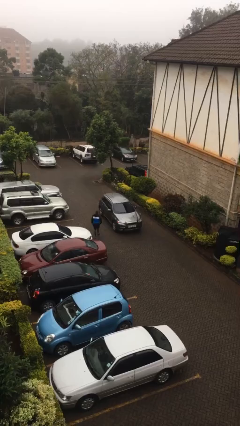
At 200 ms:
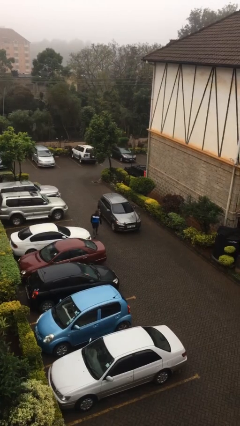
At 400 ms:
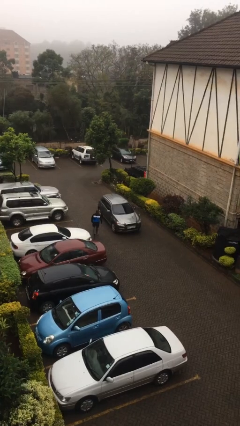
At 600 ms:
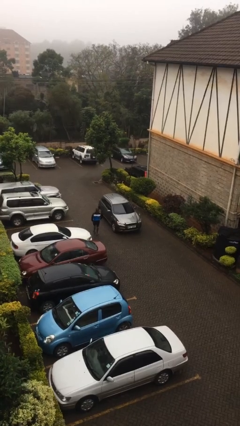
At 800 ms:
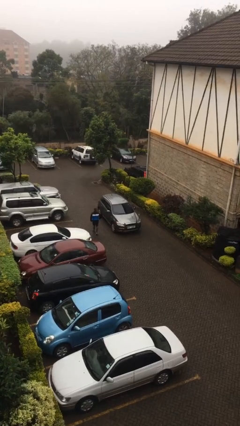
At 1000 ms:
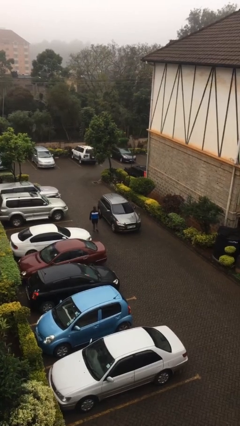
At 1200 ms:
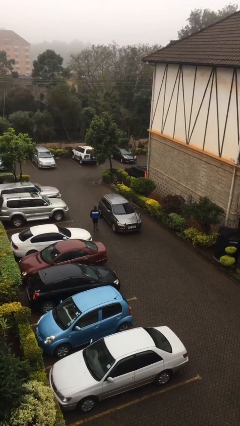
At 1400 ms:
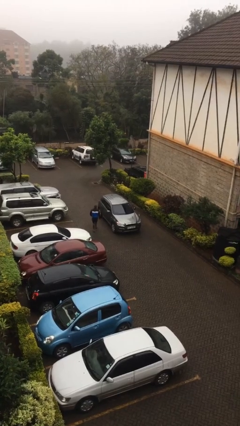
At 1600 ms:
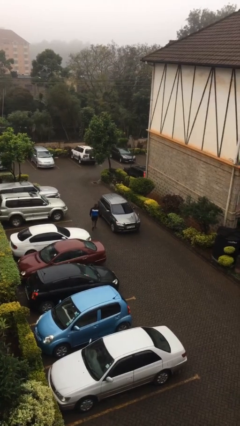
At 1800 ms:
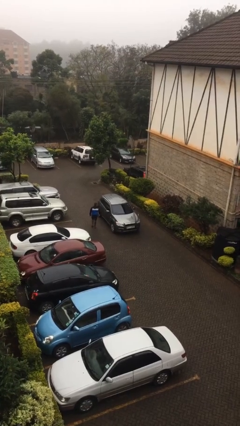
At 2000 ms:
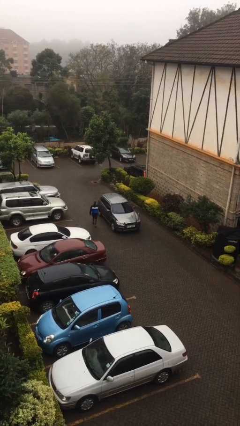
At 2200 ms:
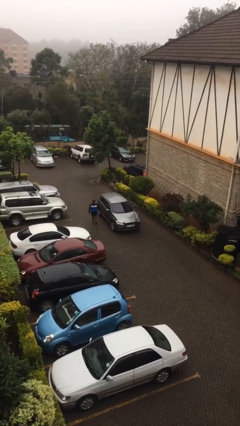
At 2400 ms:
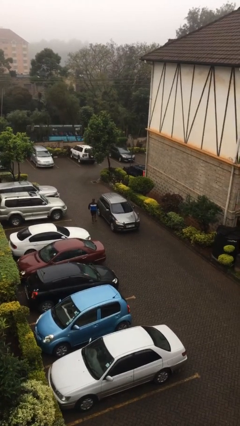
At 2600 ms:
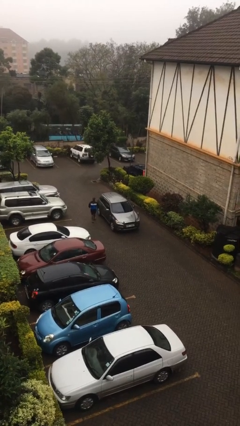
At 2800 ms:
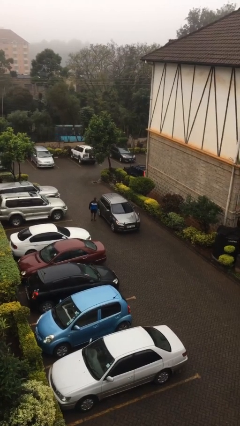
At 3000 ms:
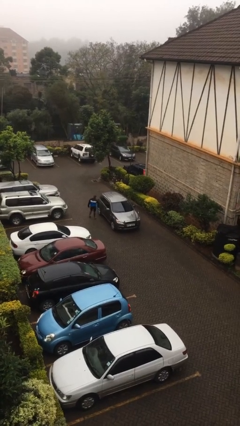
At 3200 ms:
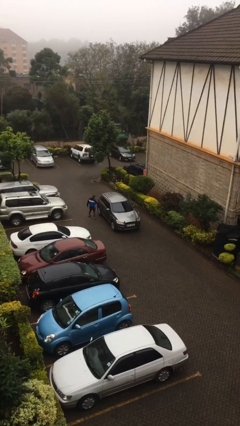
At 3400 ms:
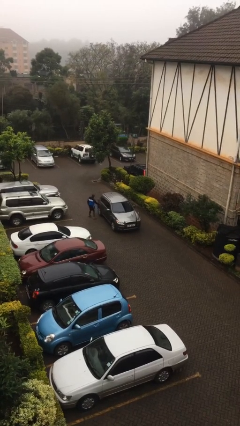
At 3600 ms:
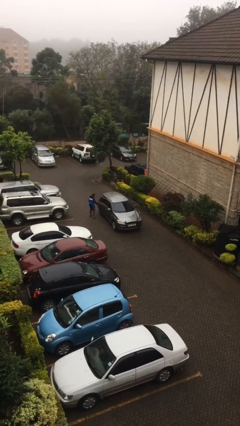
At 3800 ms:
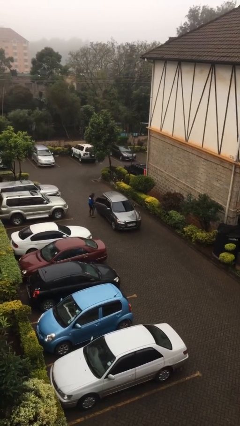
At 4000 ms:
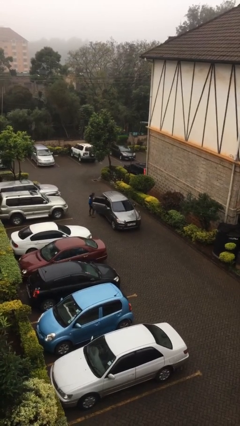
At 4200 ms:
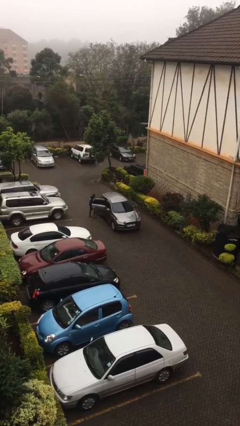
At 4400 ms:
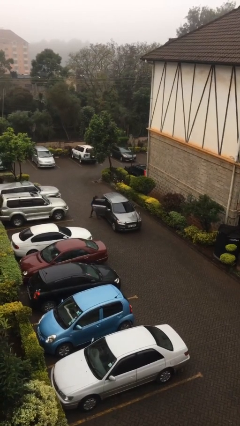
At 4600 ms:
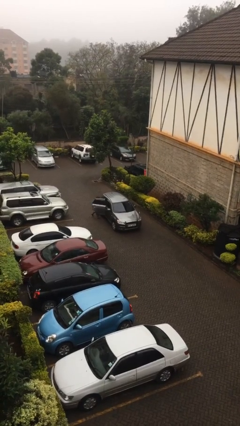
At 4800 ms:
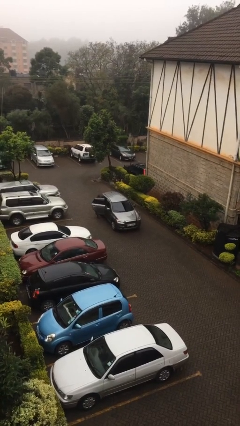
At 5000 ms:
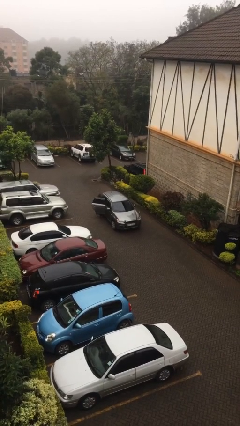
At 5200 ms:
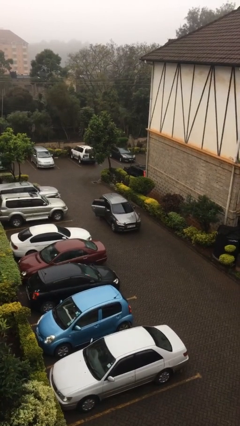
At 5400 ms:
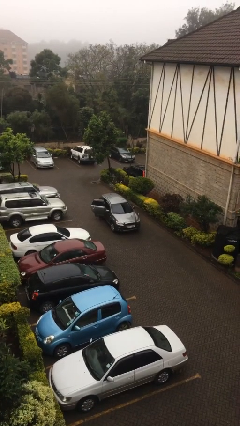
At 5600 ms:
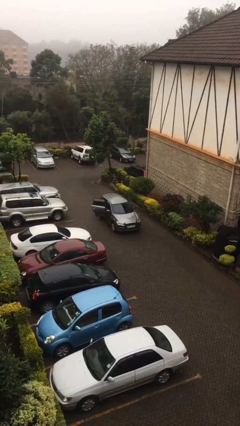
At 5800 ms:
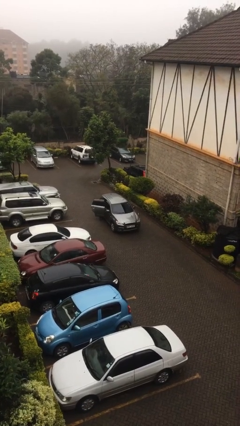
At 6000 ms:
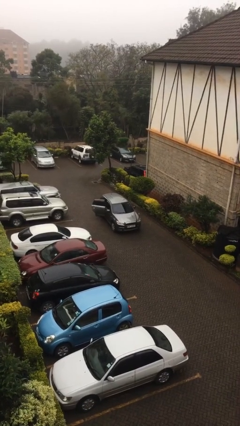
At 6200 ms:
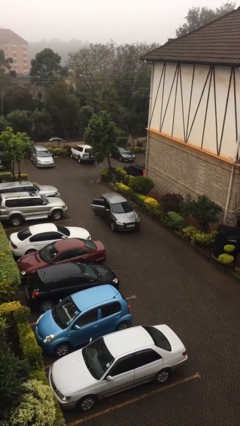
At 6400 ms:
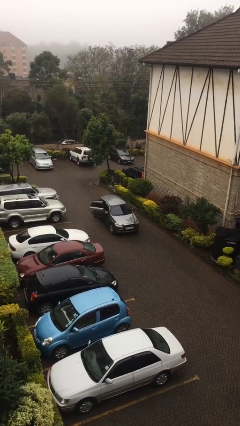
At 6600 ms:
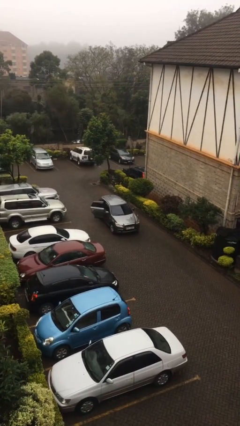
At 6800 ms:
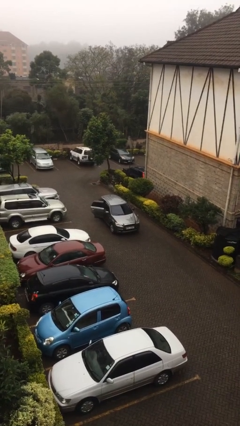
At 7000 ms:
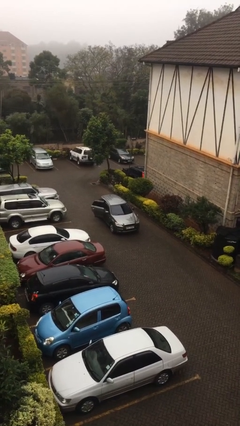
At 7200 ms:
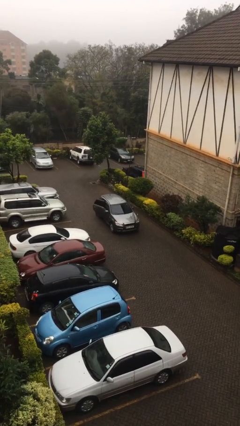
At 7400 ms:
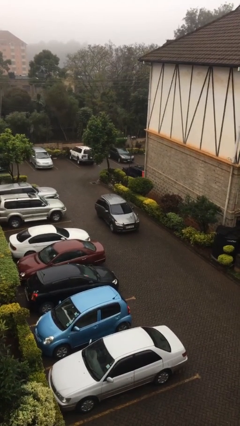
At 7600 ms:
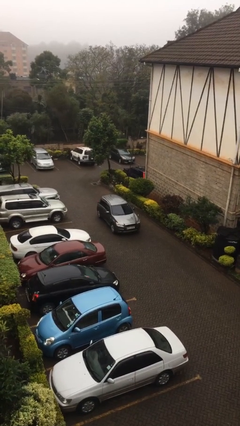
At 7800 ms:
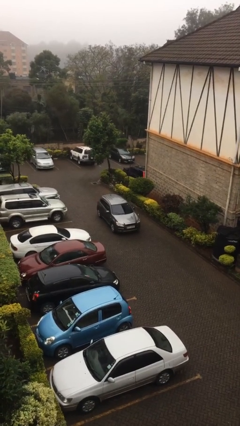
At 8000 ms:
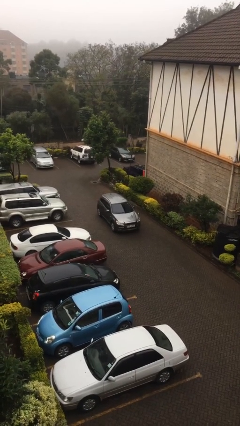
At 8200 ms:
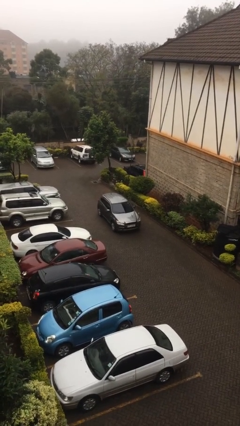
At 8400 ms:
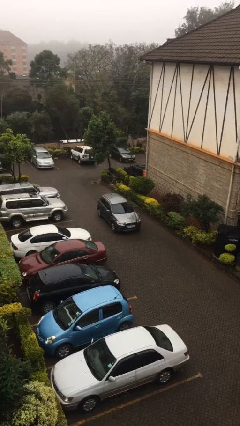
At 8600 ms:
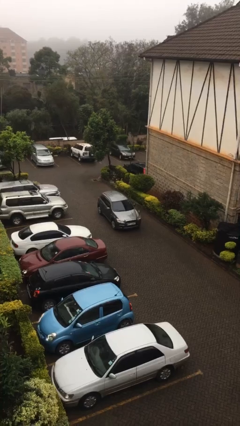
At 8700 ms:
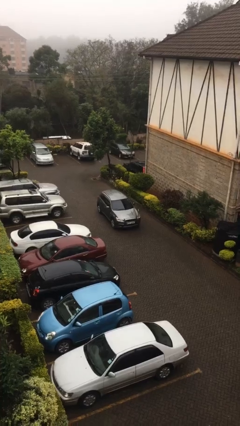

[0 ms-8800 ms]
car picks up person

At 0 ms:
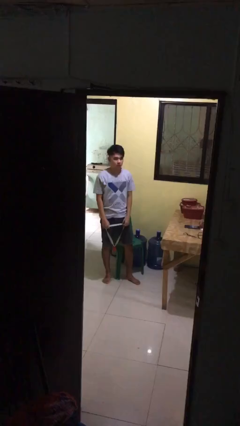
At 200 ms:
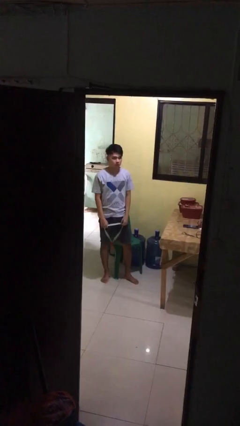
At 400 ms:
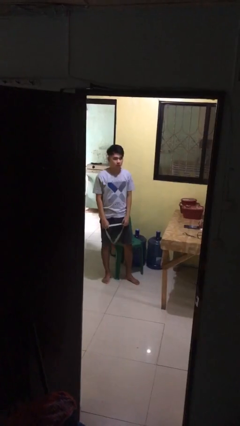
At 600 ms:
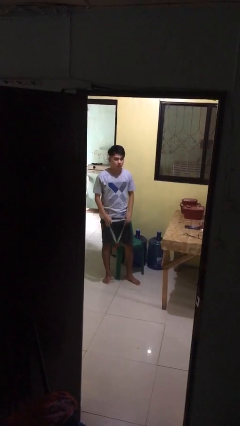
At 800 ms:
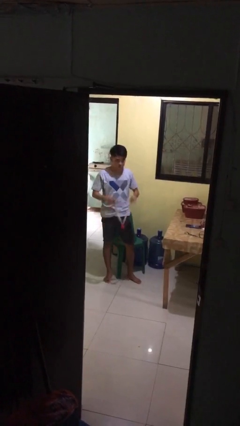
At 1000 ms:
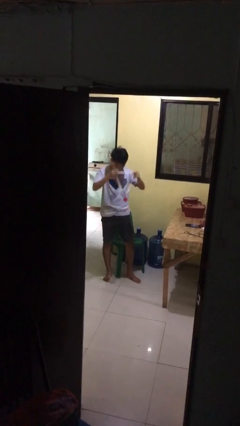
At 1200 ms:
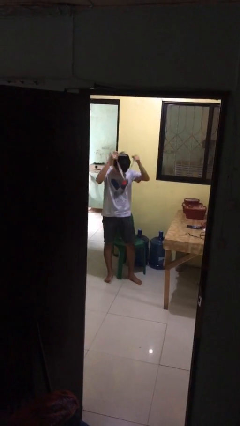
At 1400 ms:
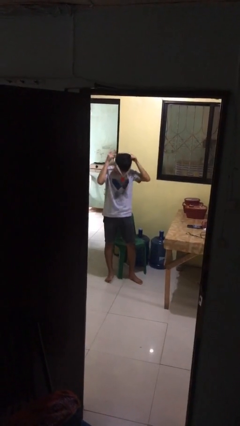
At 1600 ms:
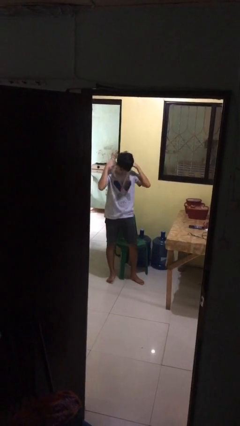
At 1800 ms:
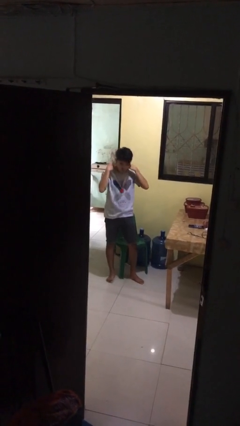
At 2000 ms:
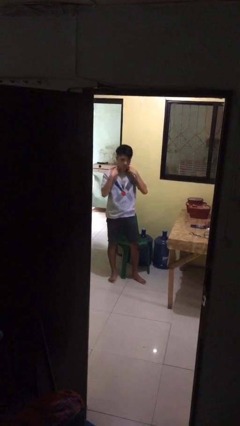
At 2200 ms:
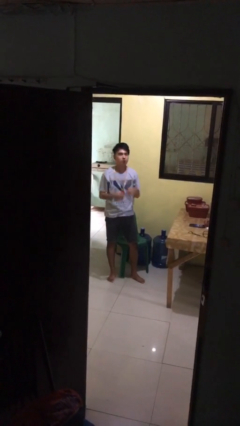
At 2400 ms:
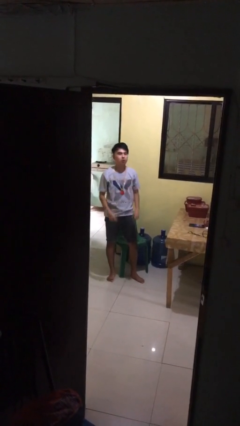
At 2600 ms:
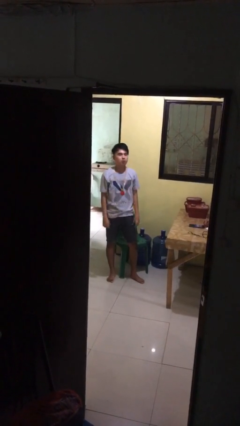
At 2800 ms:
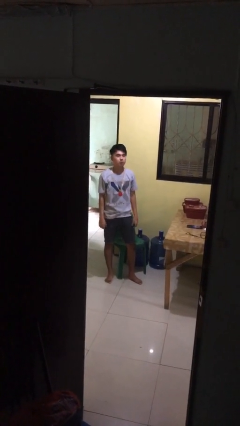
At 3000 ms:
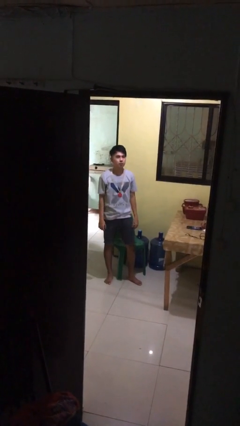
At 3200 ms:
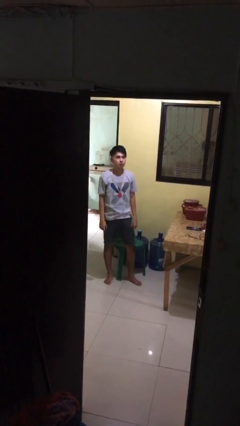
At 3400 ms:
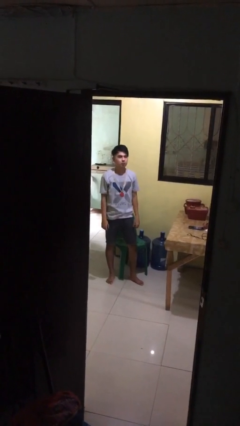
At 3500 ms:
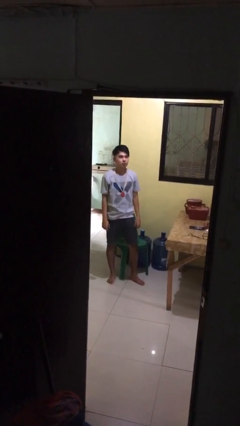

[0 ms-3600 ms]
person puts on necklace

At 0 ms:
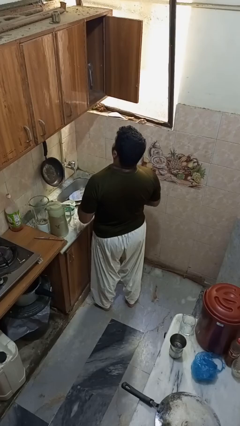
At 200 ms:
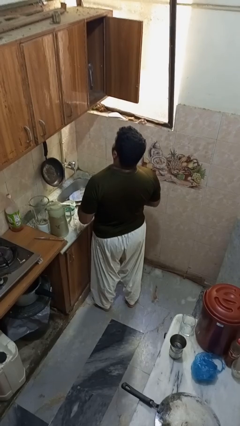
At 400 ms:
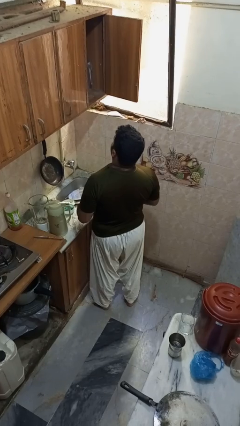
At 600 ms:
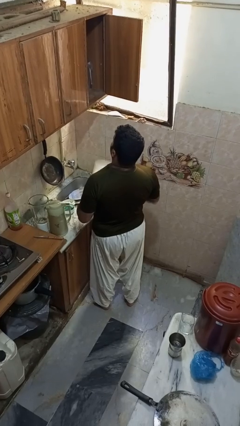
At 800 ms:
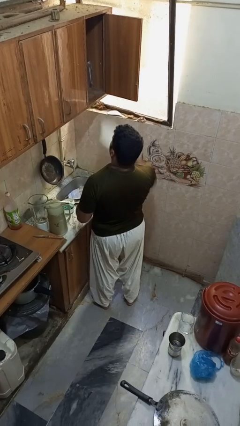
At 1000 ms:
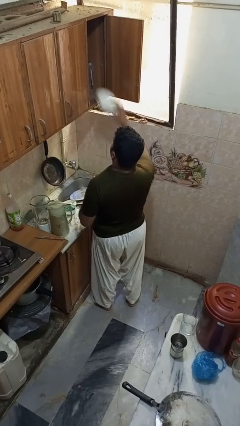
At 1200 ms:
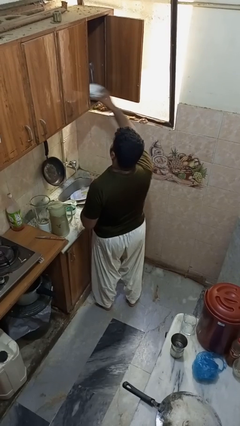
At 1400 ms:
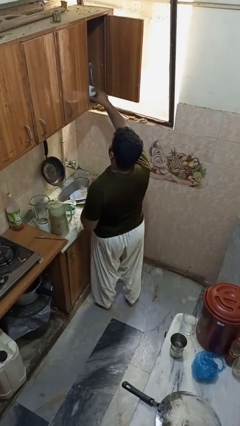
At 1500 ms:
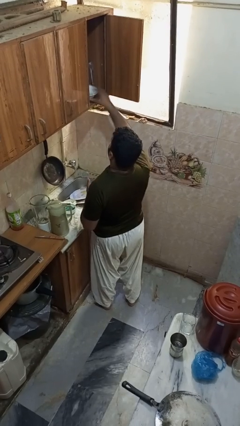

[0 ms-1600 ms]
person puts object in cabinet

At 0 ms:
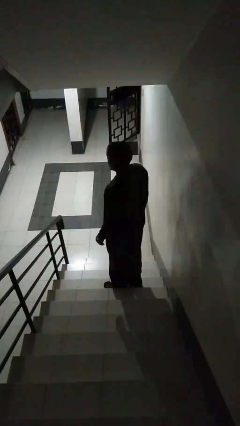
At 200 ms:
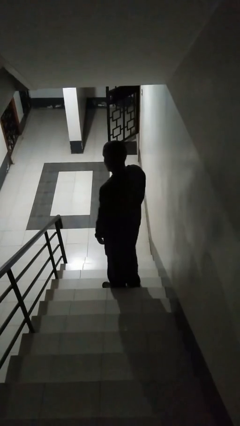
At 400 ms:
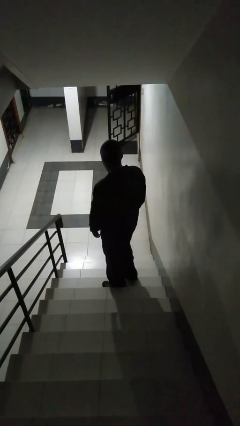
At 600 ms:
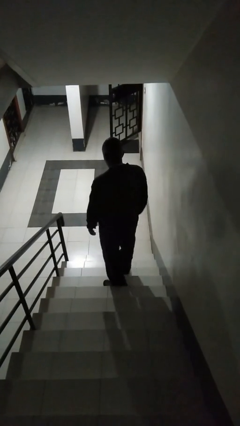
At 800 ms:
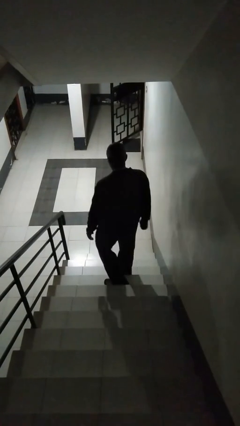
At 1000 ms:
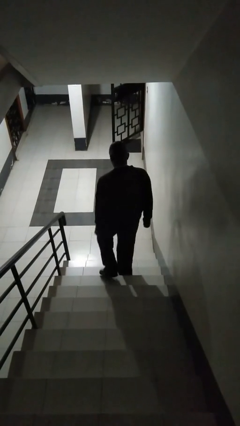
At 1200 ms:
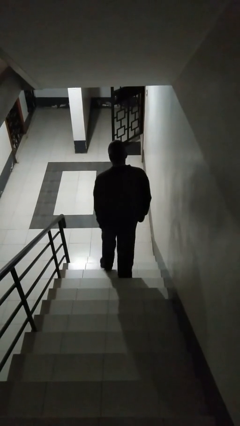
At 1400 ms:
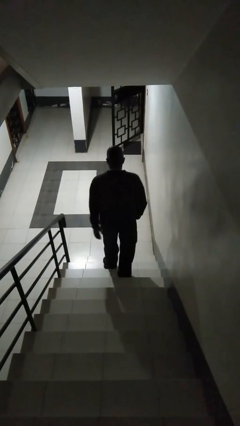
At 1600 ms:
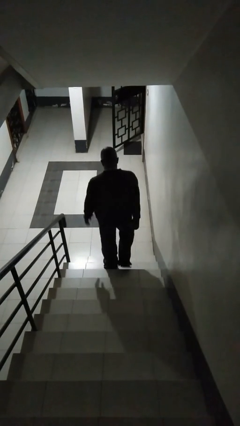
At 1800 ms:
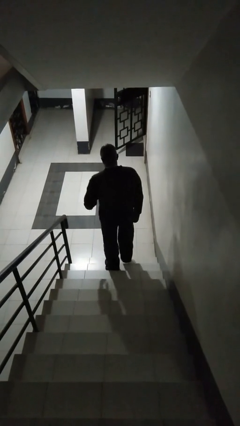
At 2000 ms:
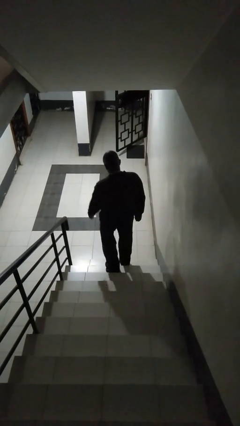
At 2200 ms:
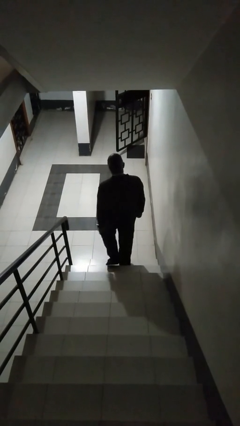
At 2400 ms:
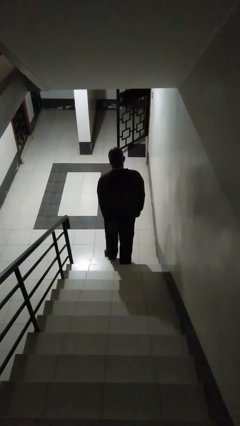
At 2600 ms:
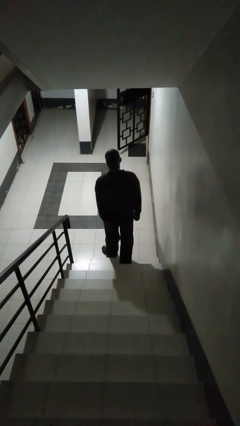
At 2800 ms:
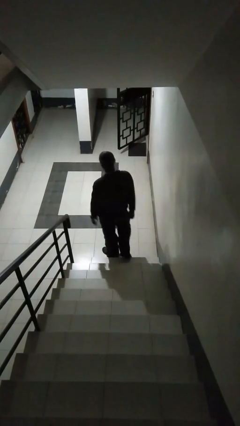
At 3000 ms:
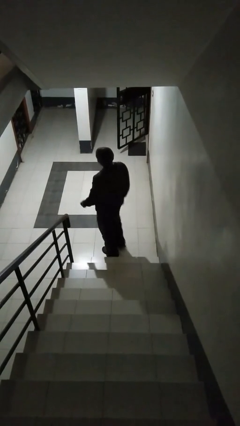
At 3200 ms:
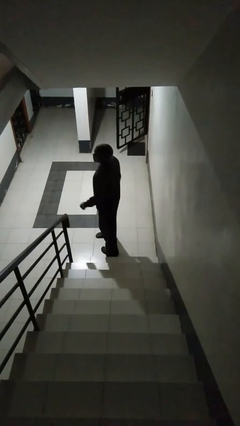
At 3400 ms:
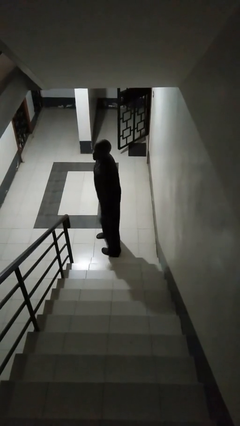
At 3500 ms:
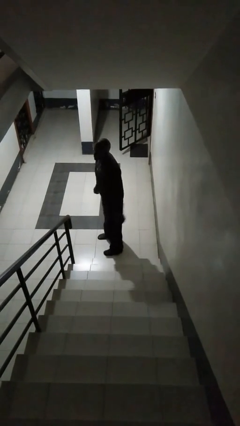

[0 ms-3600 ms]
person climbs down stairs

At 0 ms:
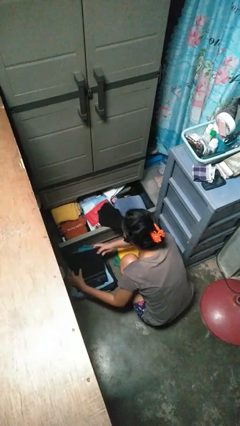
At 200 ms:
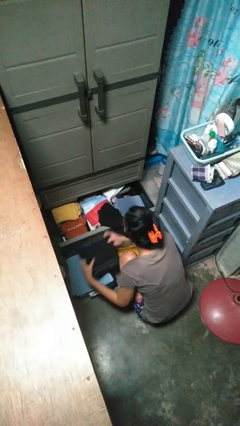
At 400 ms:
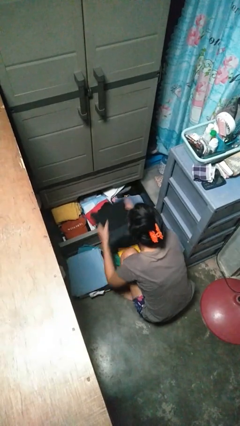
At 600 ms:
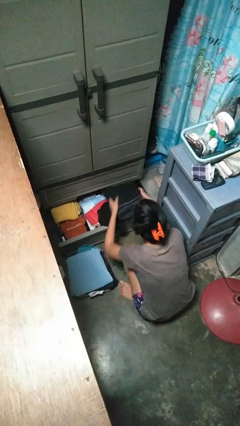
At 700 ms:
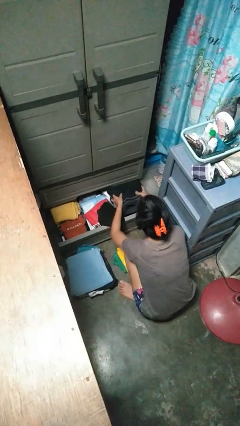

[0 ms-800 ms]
person puts clothes into dresser
